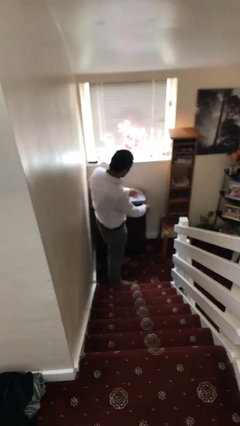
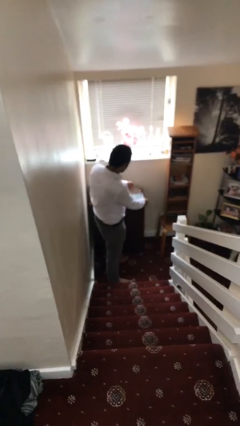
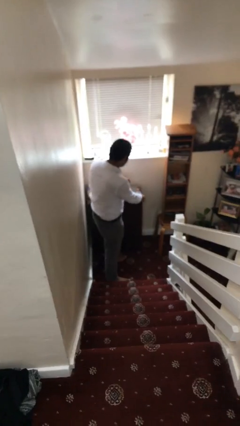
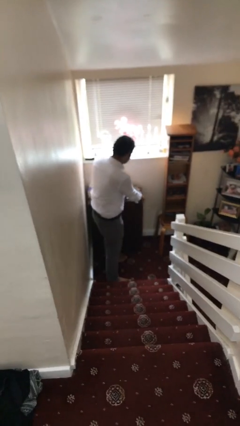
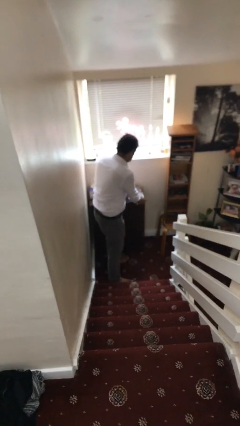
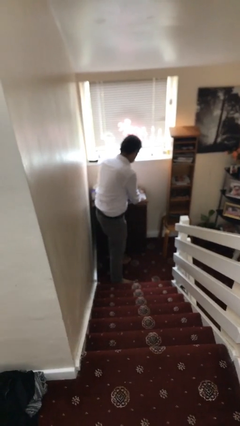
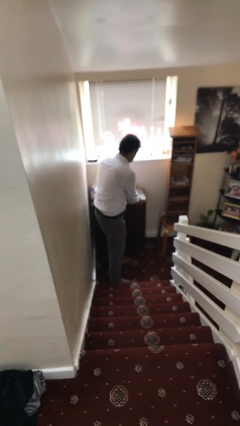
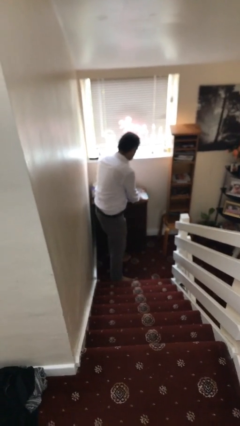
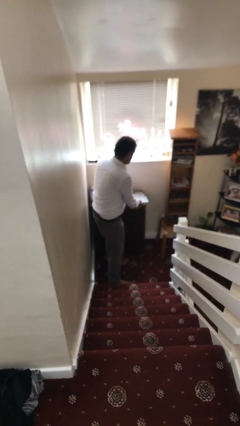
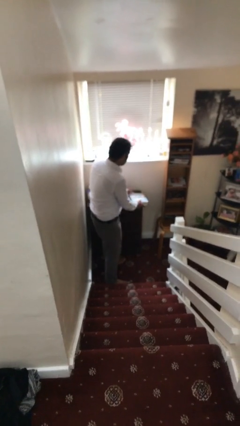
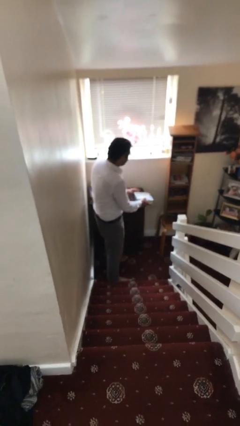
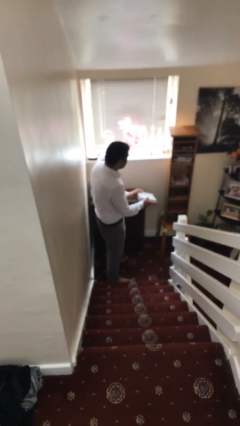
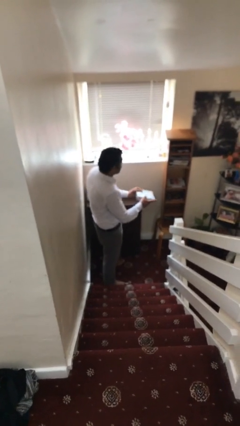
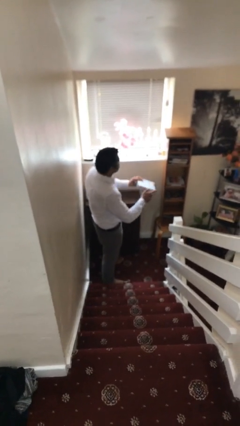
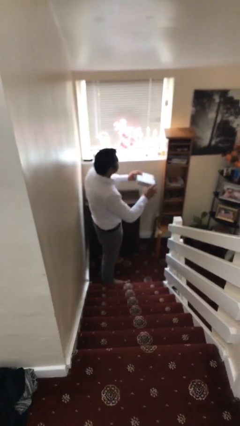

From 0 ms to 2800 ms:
person picks up object from table

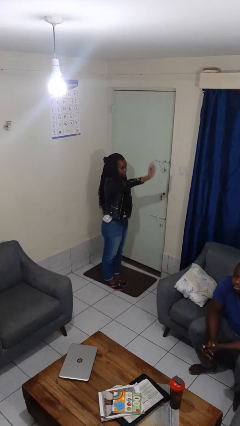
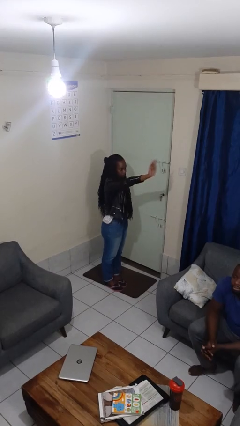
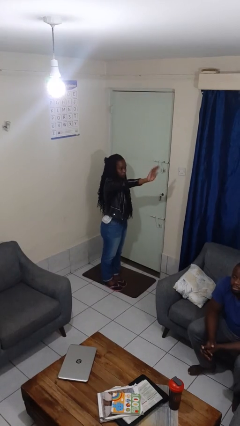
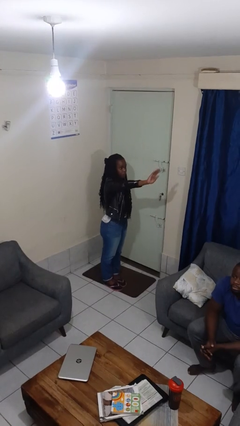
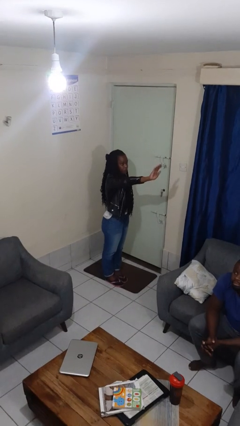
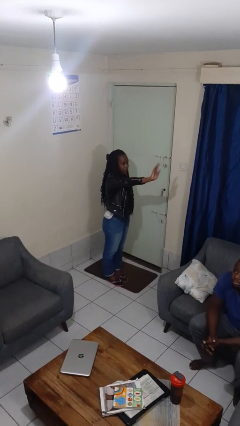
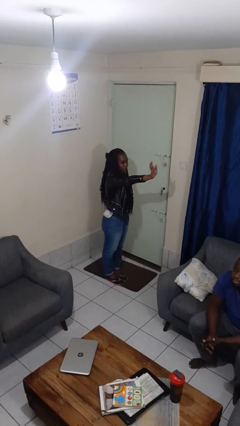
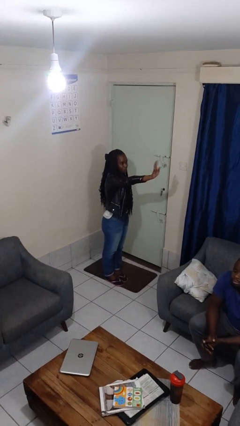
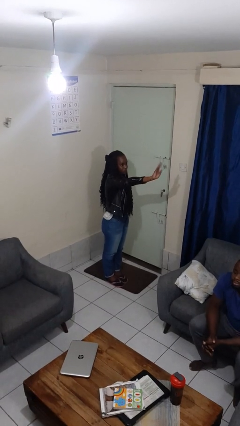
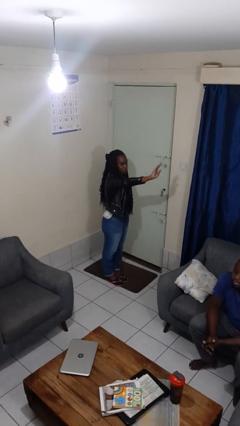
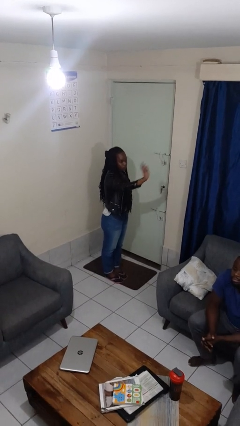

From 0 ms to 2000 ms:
person waves at person

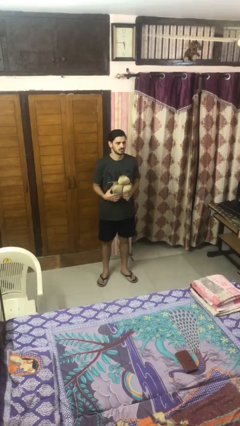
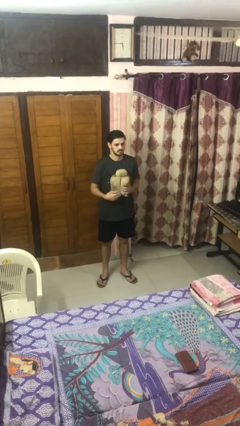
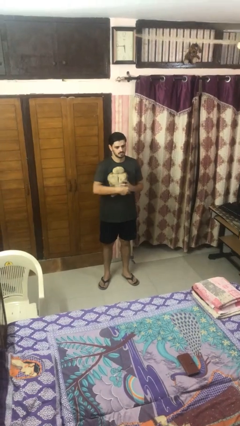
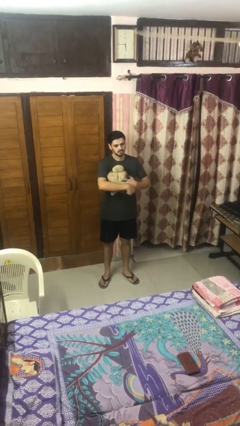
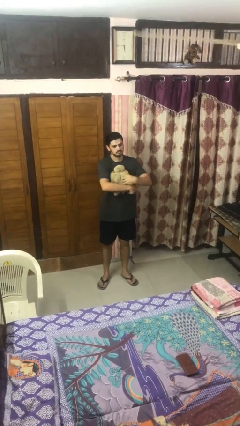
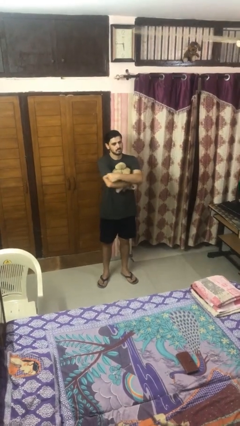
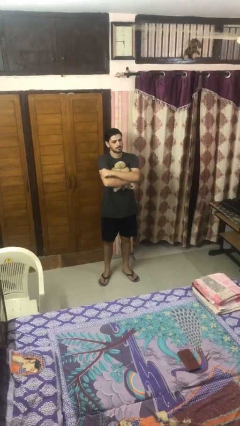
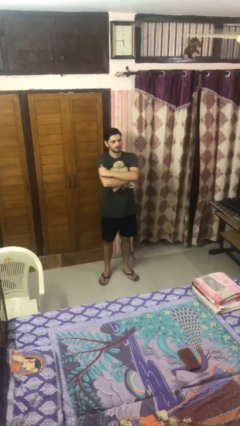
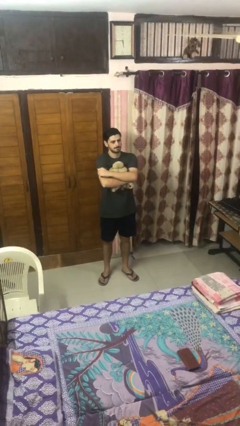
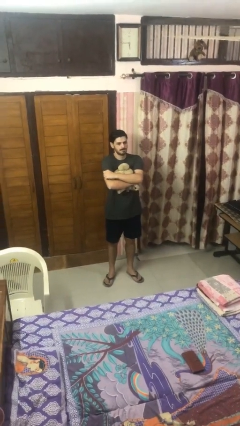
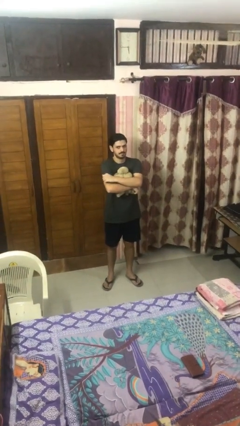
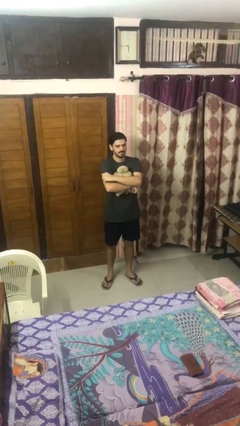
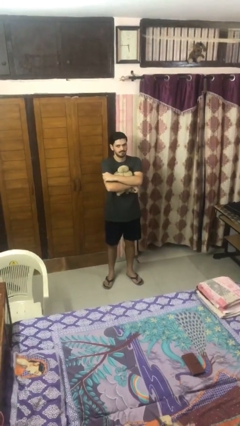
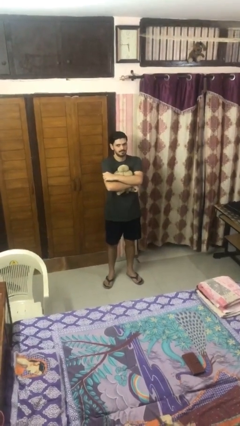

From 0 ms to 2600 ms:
person hugs stuffed animal

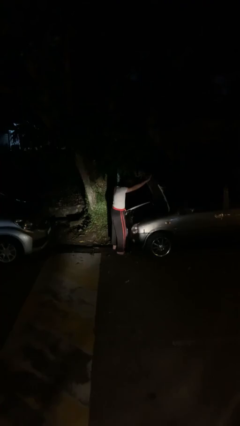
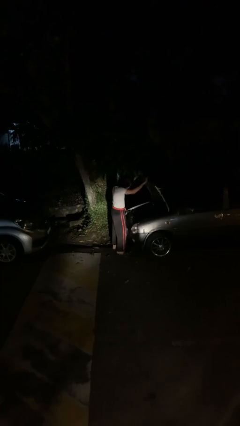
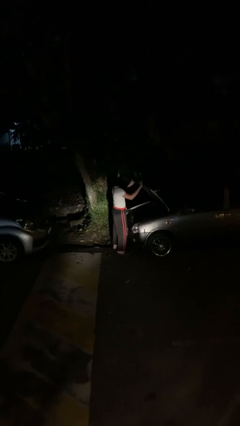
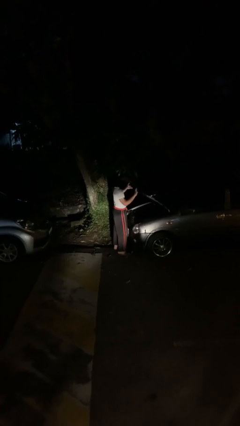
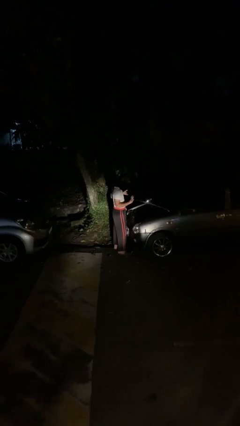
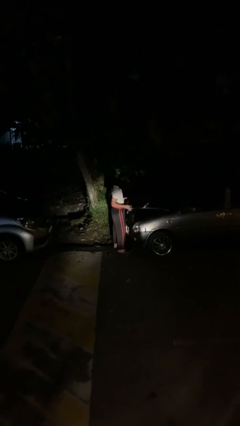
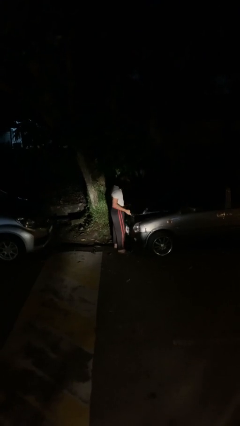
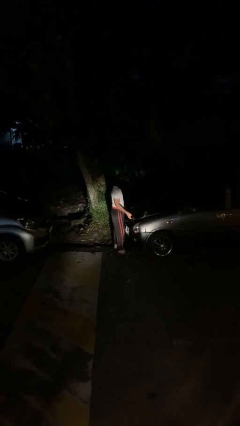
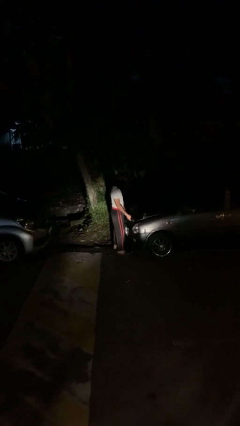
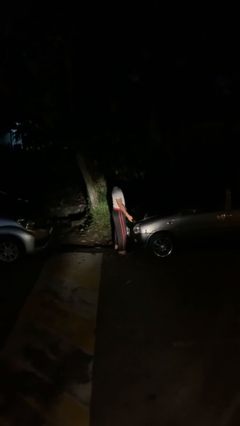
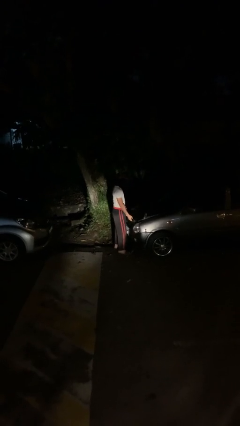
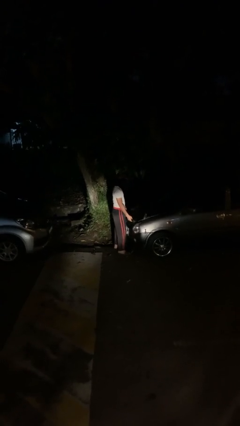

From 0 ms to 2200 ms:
person closes car hood

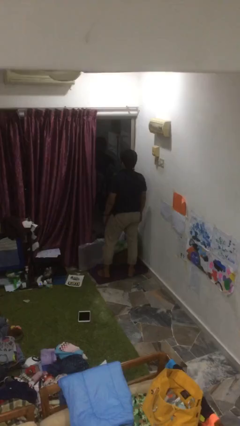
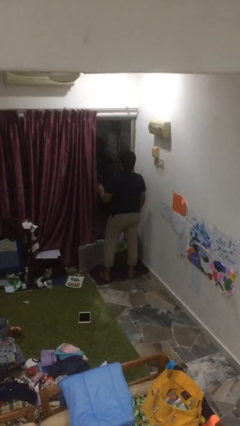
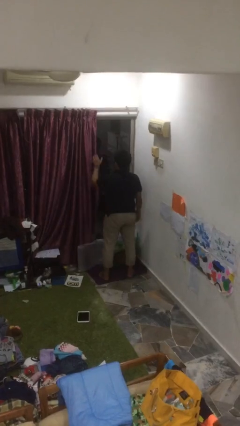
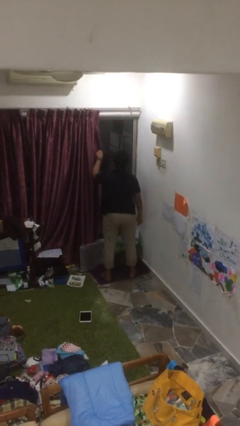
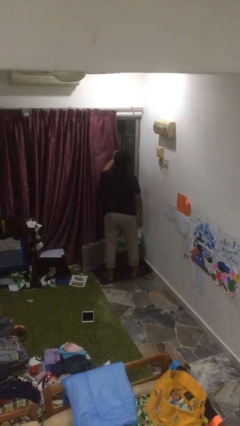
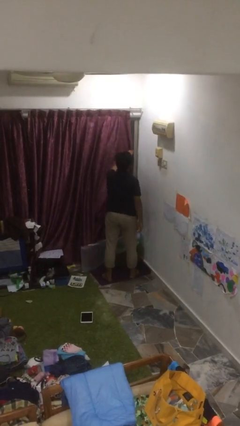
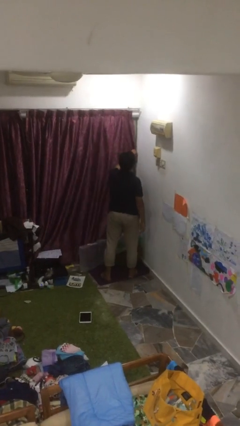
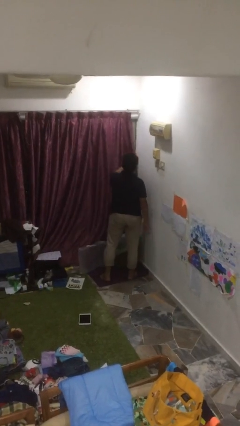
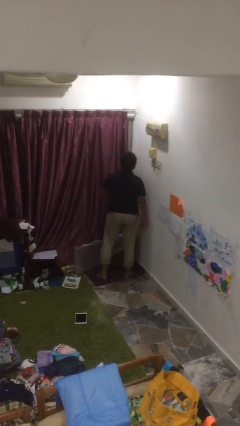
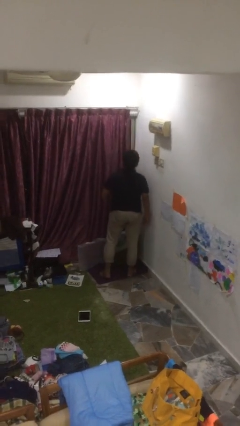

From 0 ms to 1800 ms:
person closes curtains

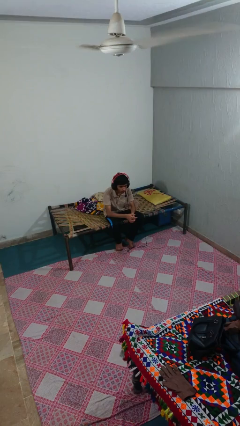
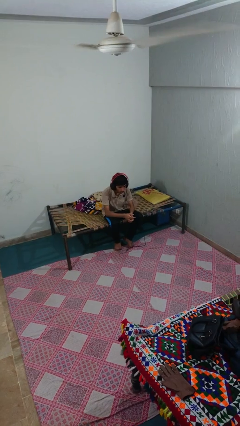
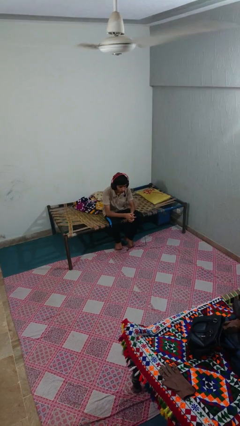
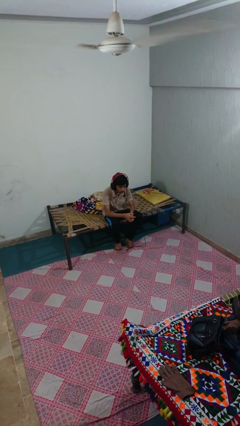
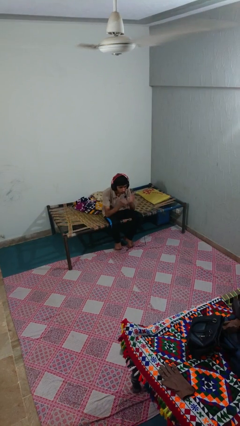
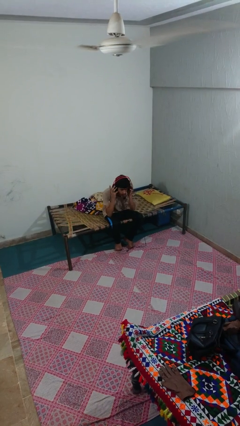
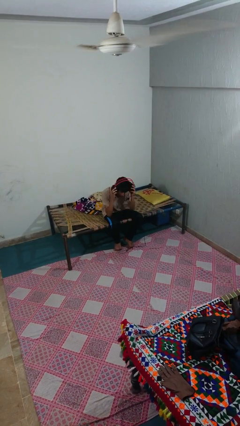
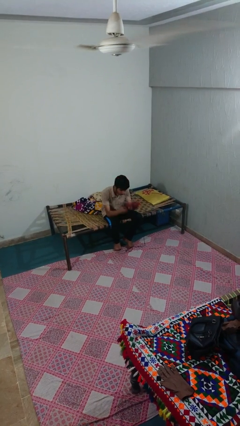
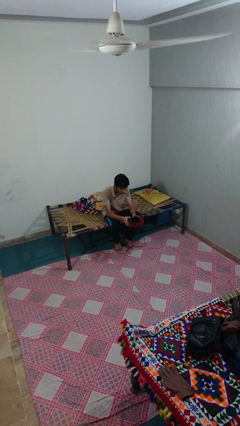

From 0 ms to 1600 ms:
person takes off headphones

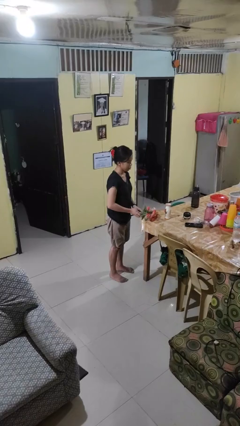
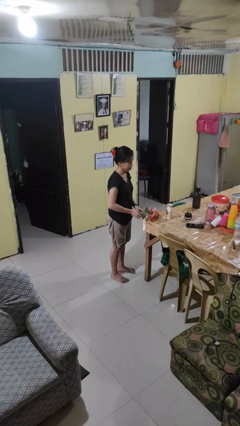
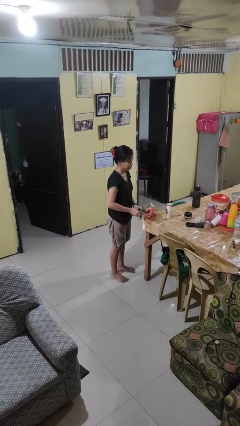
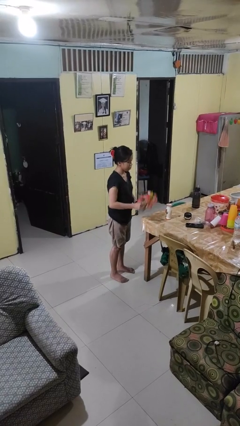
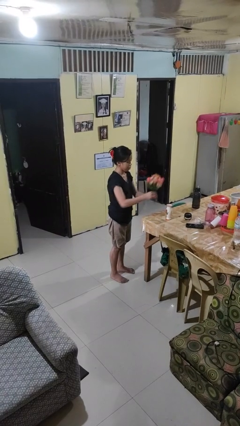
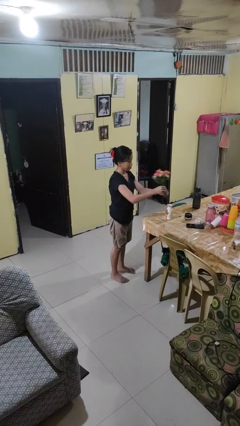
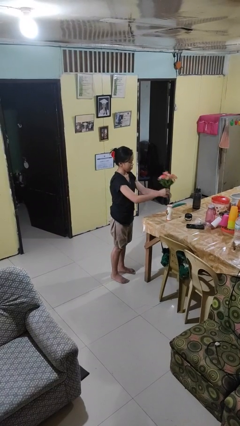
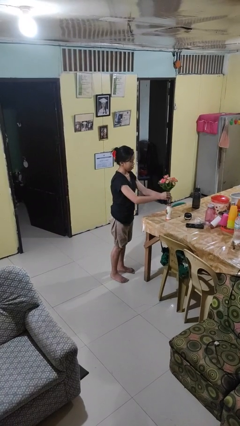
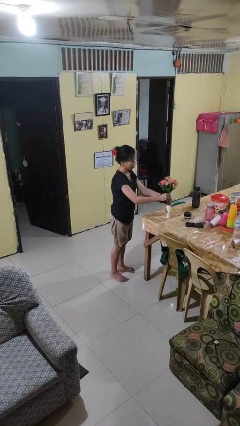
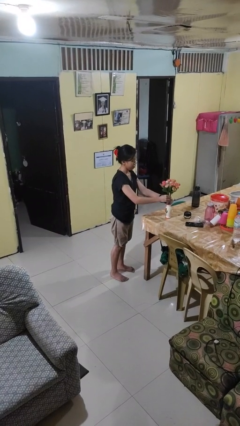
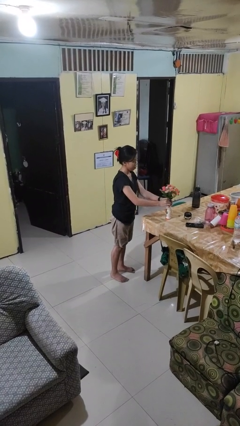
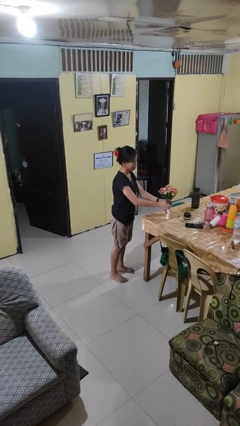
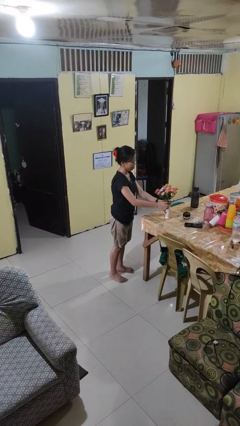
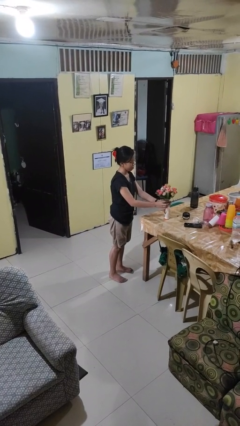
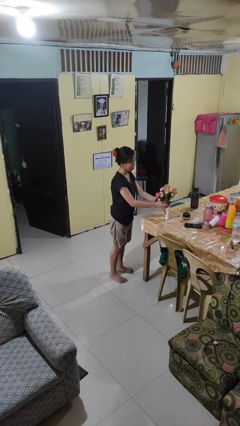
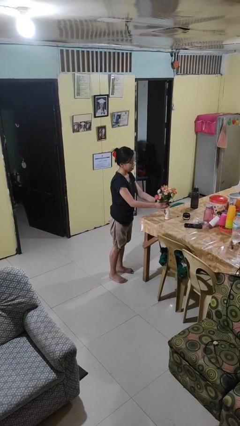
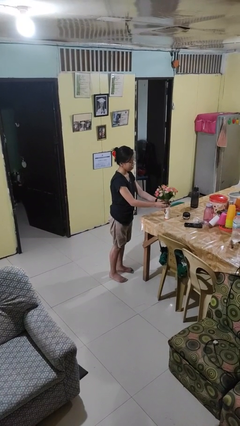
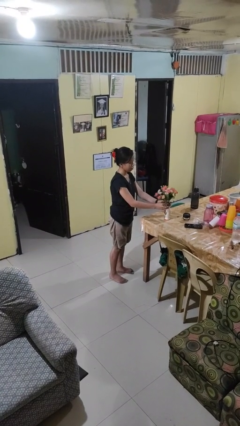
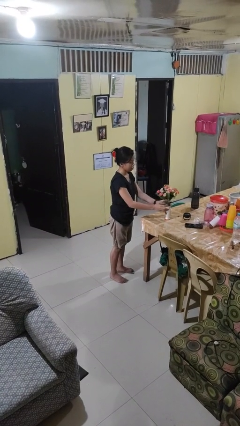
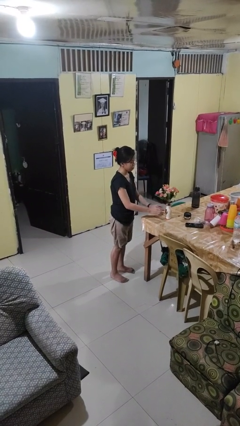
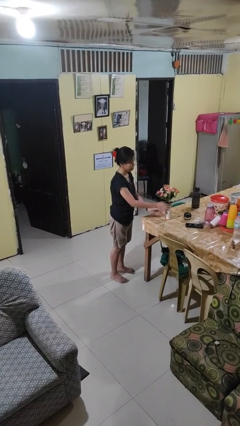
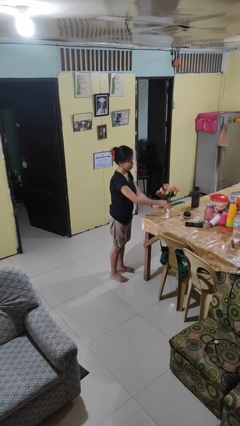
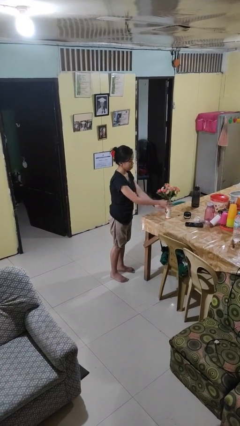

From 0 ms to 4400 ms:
person arranges flowers in vase
